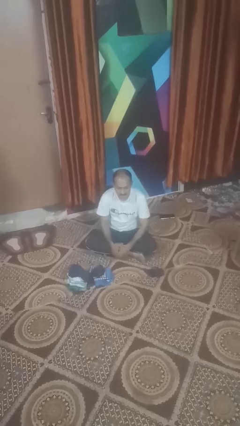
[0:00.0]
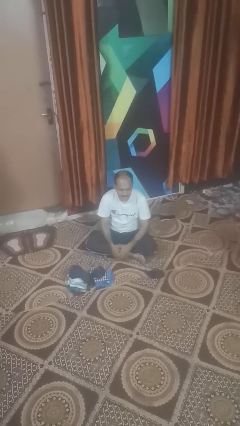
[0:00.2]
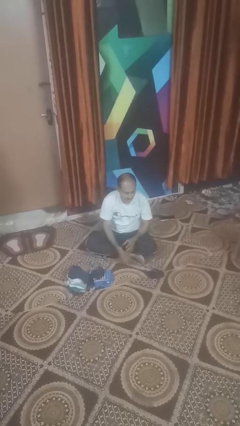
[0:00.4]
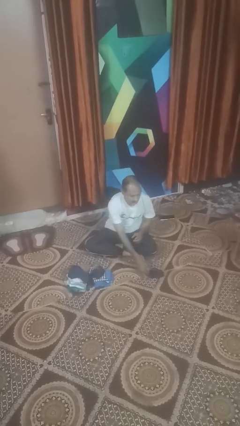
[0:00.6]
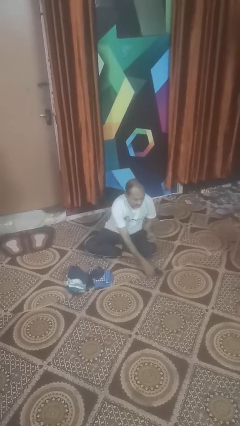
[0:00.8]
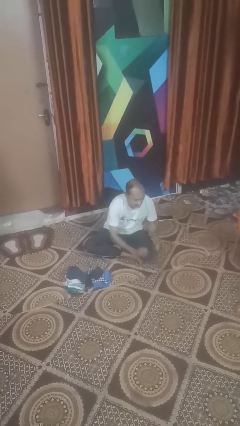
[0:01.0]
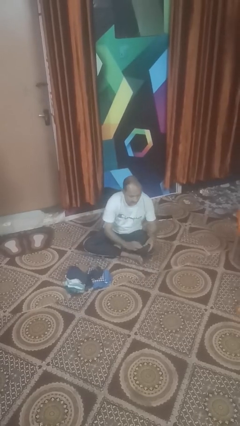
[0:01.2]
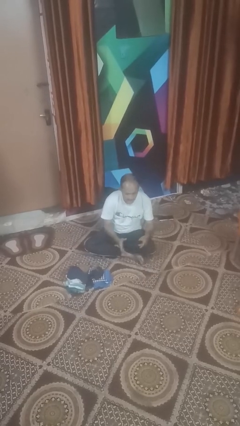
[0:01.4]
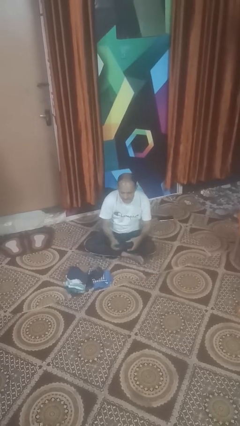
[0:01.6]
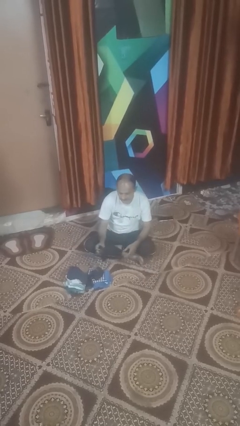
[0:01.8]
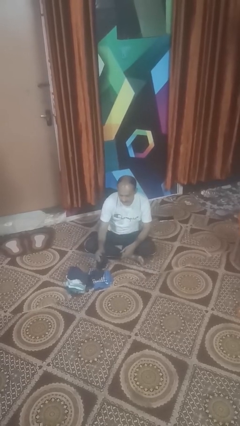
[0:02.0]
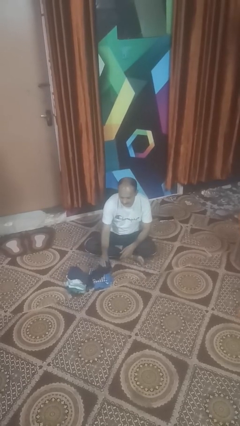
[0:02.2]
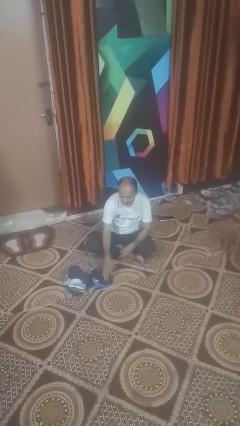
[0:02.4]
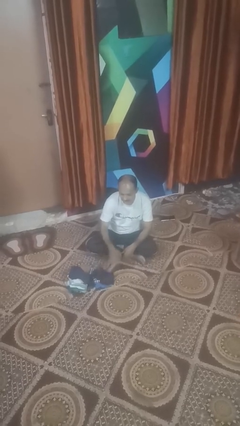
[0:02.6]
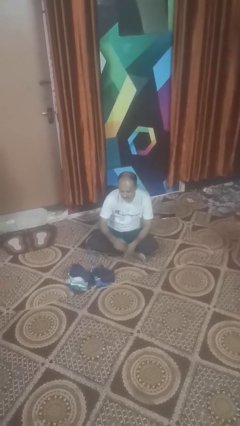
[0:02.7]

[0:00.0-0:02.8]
person folds socks

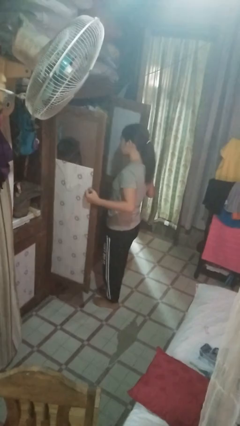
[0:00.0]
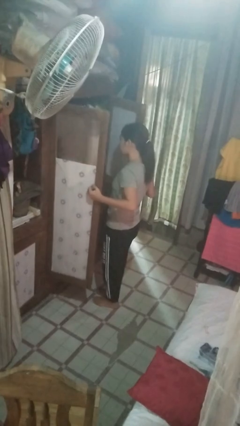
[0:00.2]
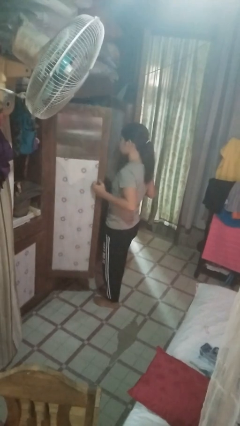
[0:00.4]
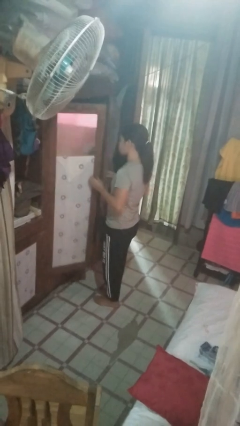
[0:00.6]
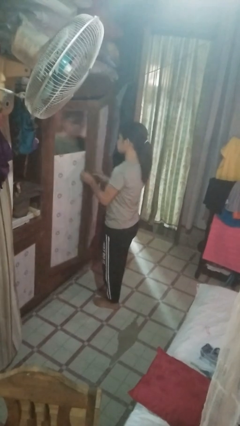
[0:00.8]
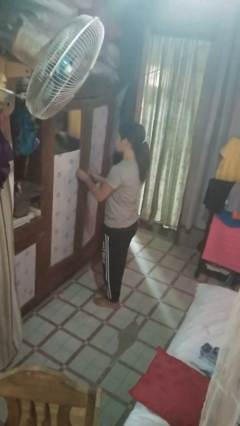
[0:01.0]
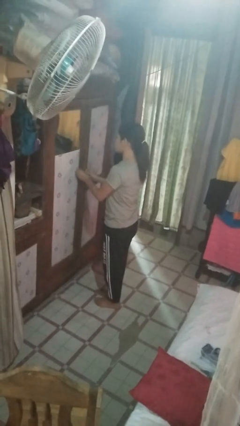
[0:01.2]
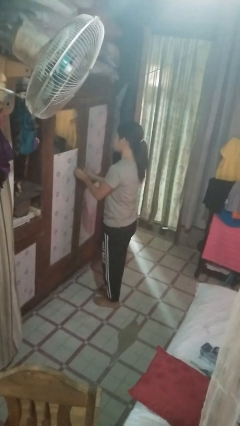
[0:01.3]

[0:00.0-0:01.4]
person closes closet door

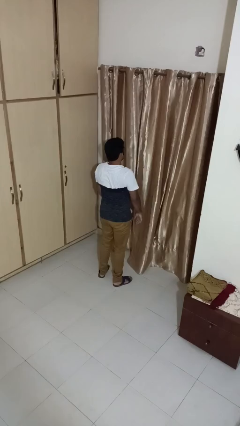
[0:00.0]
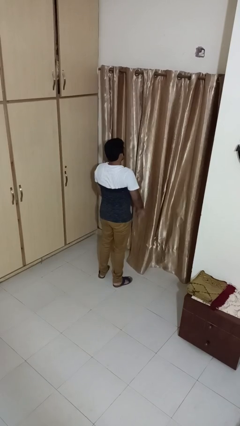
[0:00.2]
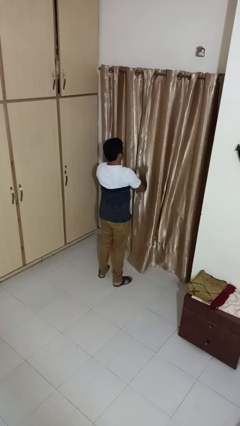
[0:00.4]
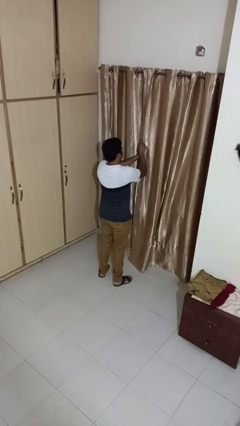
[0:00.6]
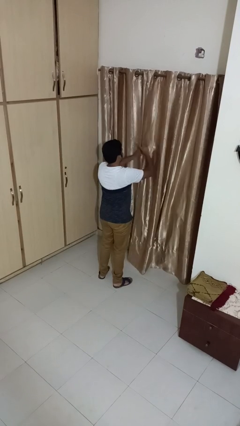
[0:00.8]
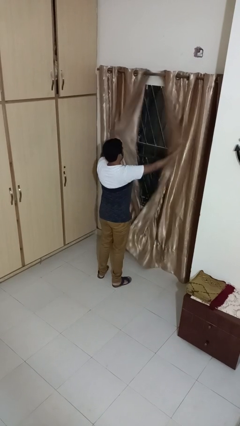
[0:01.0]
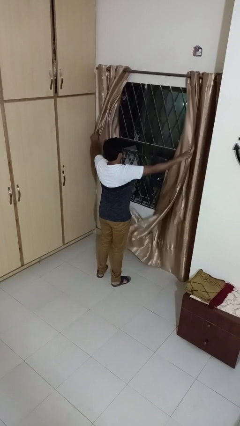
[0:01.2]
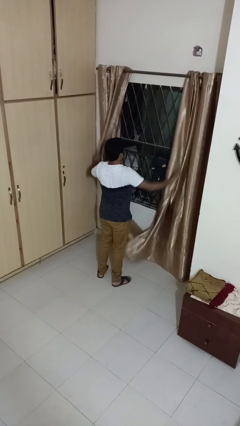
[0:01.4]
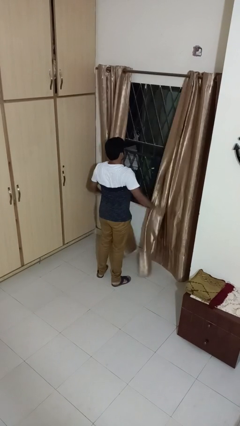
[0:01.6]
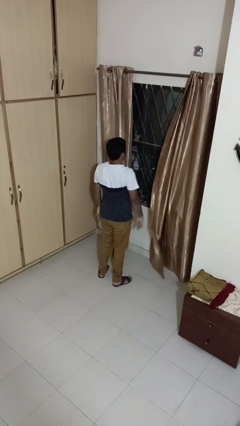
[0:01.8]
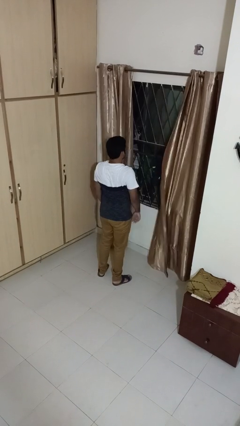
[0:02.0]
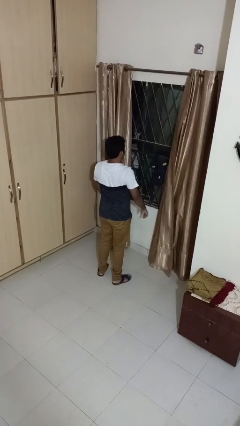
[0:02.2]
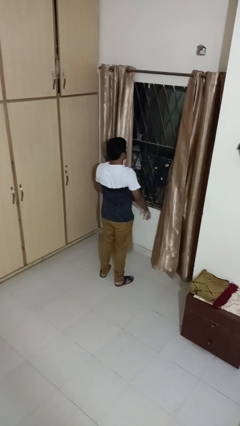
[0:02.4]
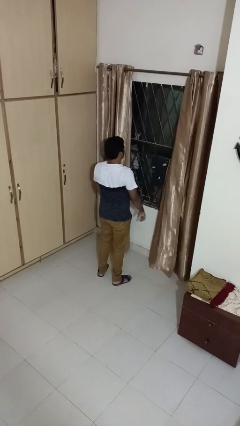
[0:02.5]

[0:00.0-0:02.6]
person opens curtains

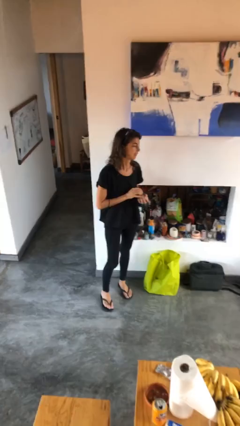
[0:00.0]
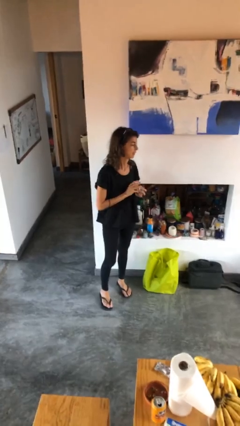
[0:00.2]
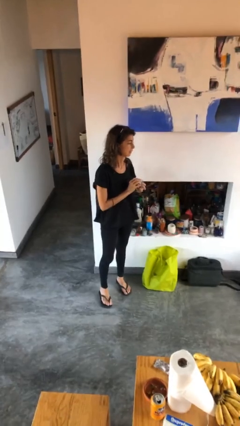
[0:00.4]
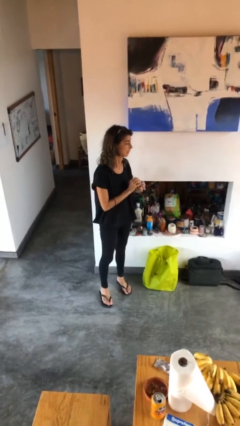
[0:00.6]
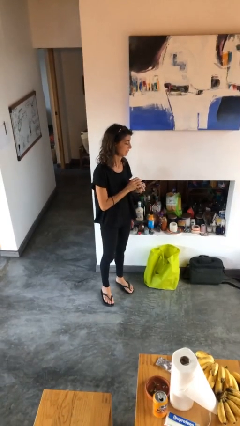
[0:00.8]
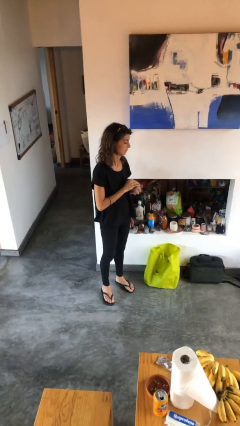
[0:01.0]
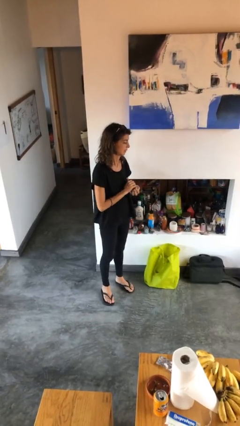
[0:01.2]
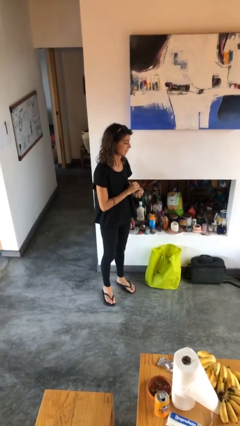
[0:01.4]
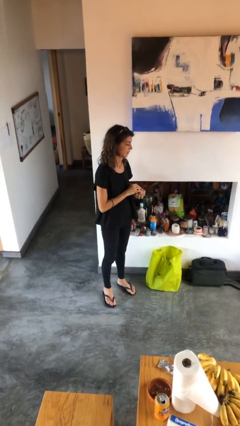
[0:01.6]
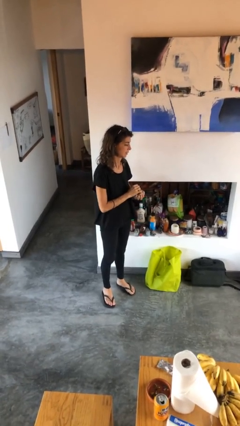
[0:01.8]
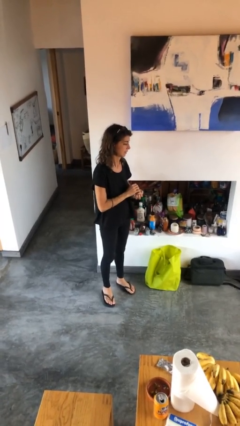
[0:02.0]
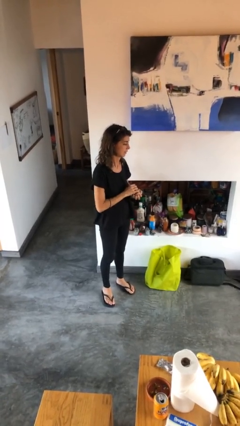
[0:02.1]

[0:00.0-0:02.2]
person squeezes object

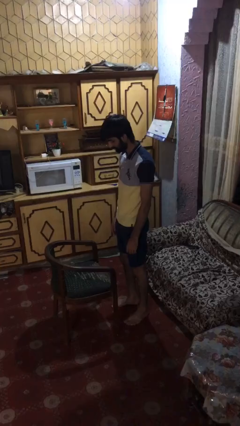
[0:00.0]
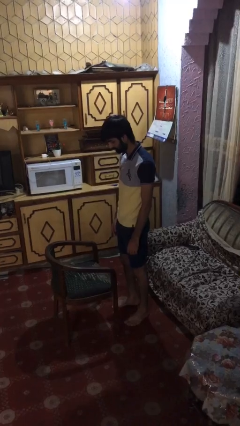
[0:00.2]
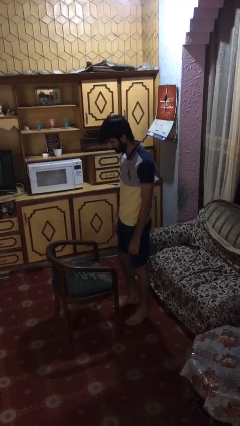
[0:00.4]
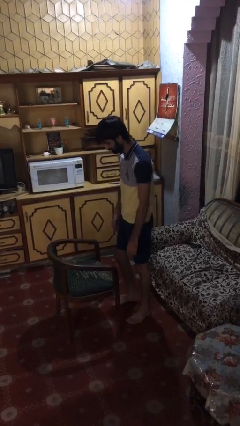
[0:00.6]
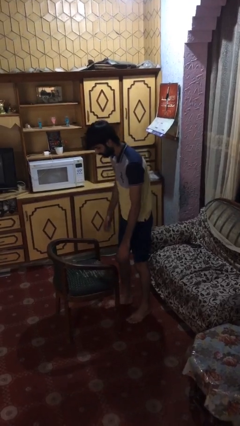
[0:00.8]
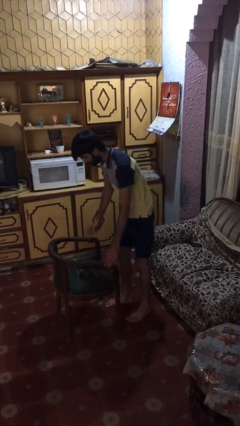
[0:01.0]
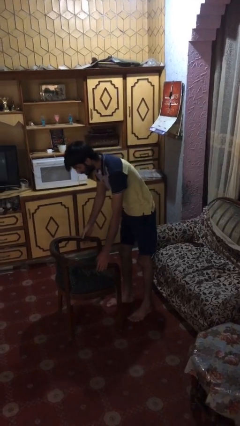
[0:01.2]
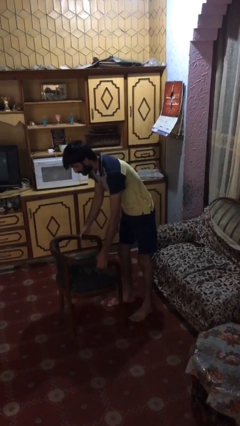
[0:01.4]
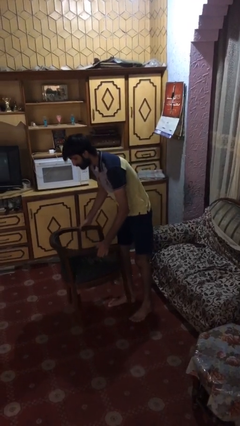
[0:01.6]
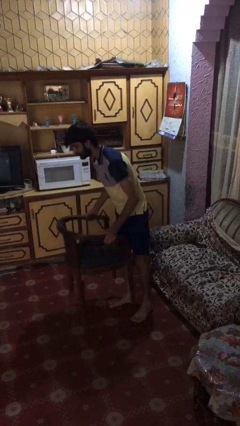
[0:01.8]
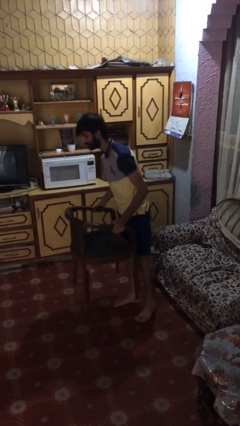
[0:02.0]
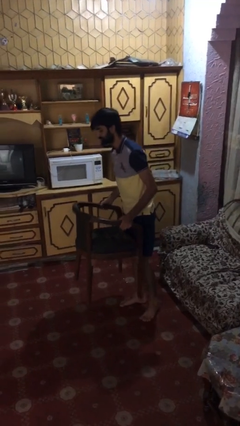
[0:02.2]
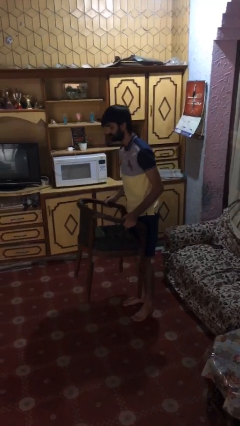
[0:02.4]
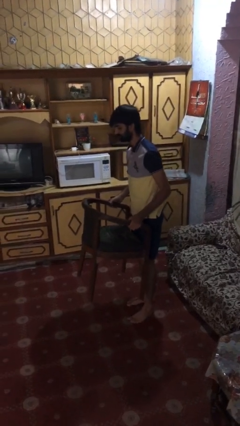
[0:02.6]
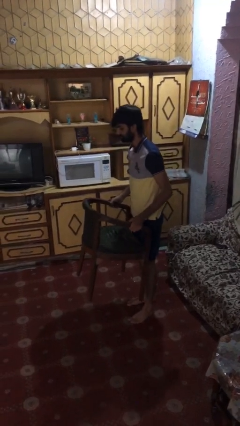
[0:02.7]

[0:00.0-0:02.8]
person picks up object from floor

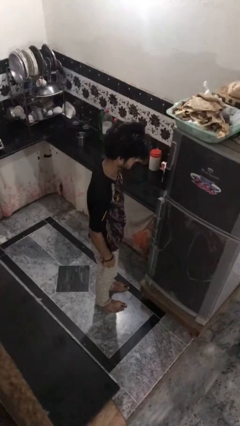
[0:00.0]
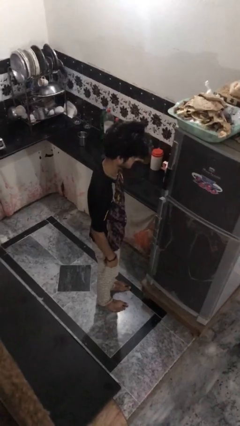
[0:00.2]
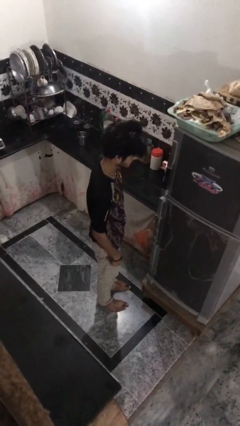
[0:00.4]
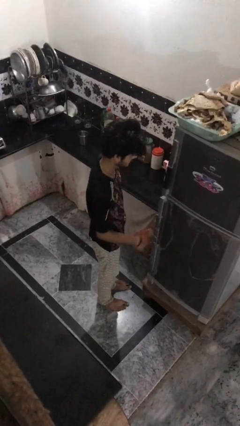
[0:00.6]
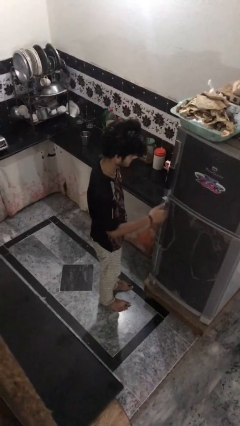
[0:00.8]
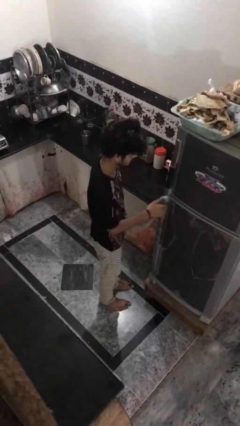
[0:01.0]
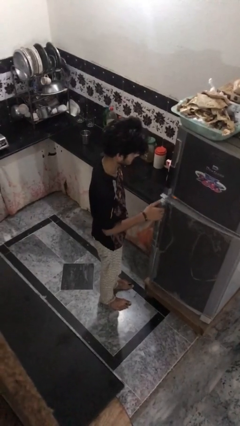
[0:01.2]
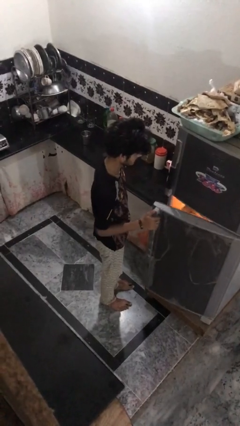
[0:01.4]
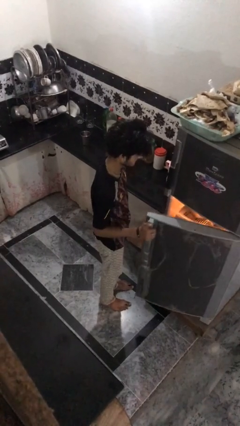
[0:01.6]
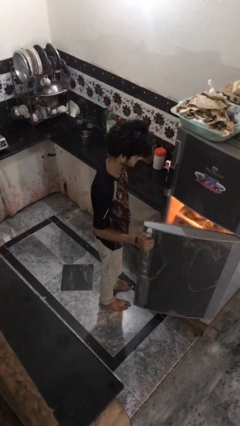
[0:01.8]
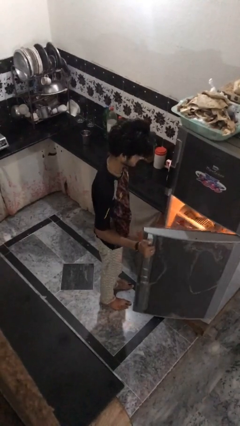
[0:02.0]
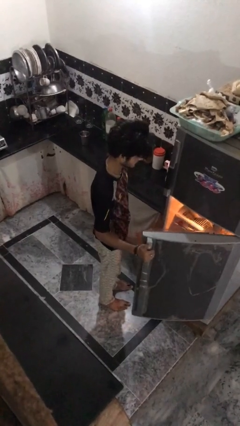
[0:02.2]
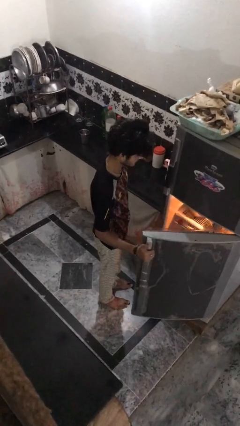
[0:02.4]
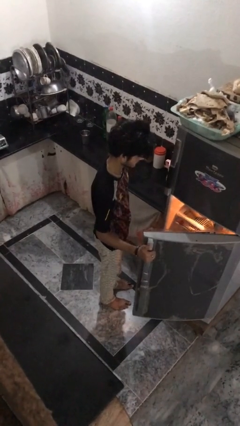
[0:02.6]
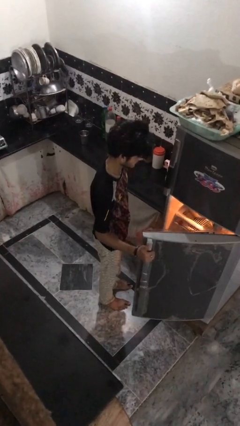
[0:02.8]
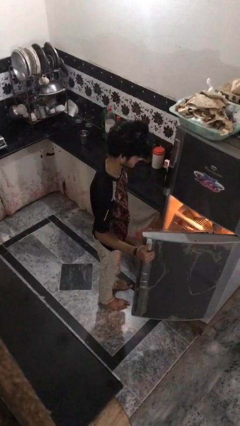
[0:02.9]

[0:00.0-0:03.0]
person opens refrigerator

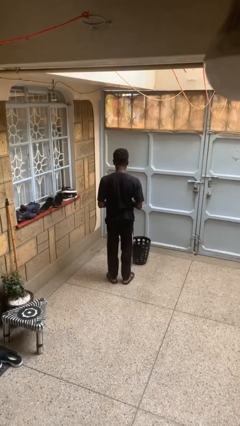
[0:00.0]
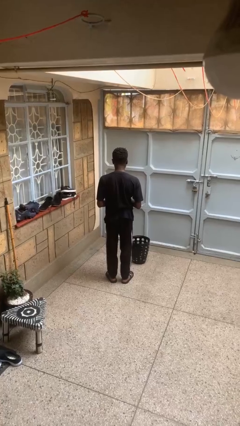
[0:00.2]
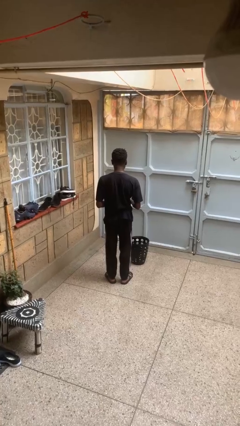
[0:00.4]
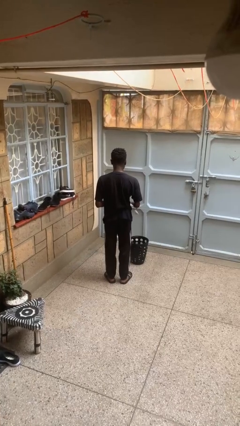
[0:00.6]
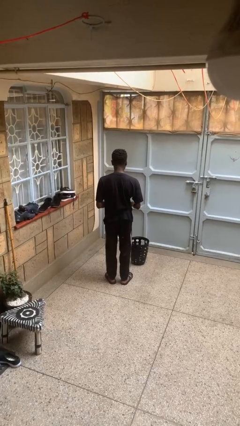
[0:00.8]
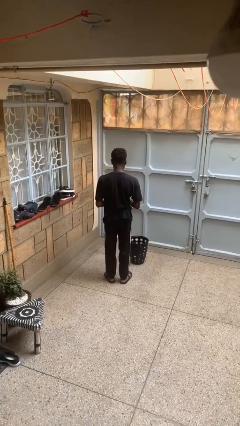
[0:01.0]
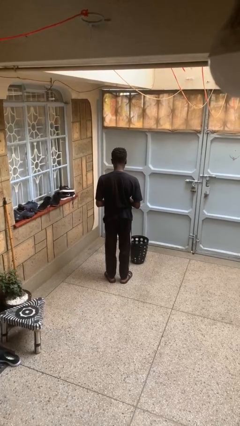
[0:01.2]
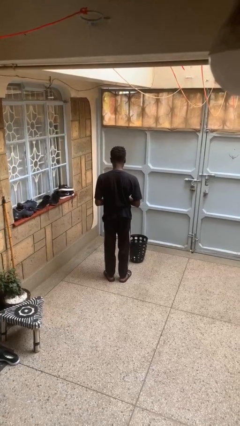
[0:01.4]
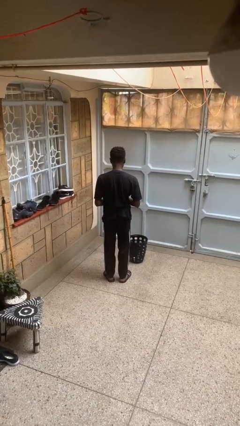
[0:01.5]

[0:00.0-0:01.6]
person discards trash

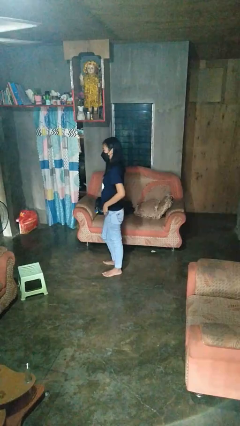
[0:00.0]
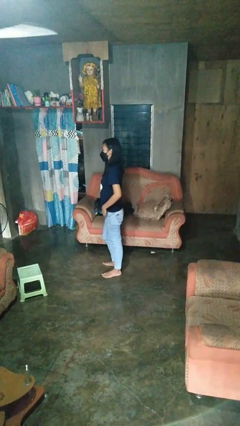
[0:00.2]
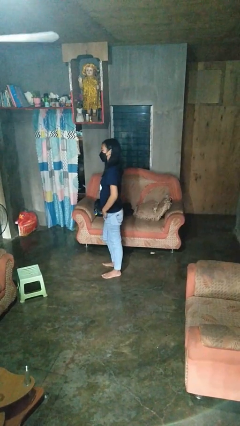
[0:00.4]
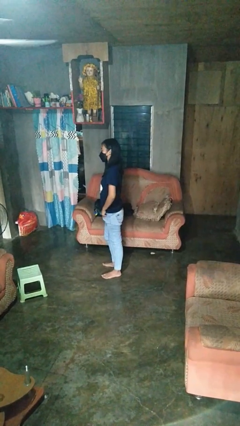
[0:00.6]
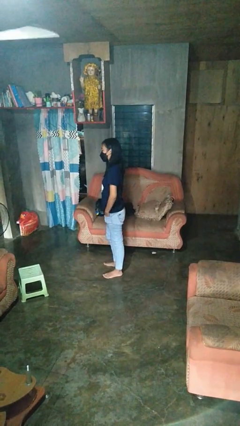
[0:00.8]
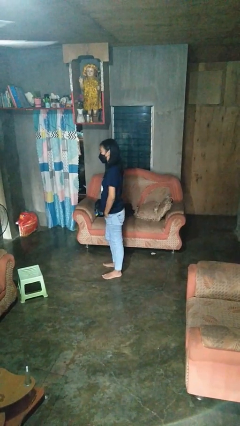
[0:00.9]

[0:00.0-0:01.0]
person puts hands in back pockets
